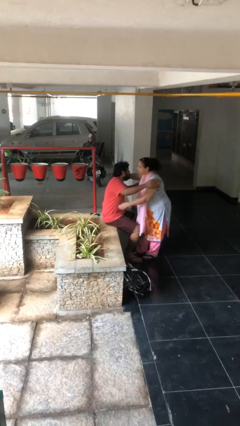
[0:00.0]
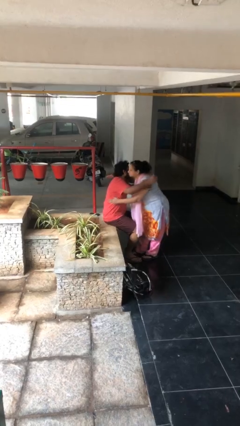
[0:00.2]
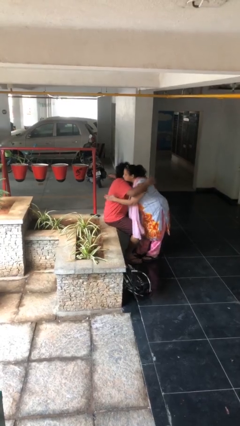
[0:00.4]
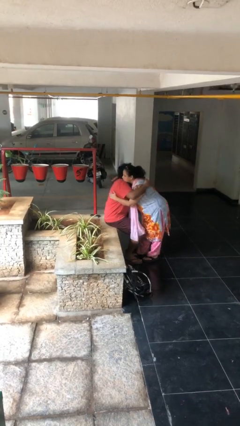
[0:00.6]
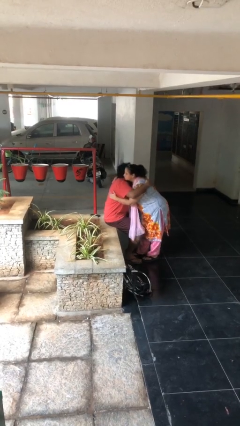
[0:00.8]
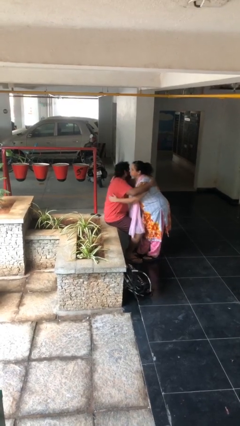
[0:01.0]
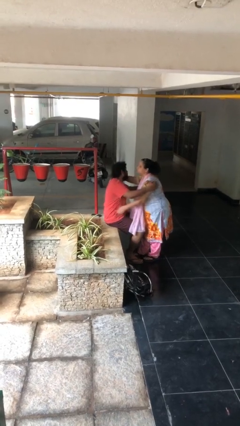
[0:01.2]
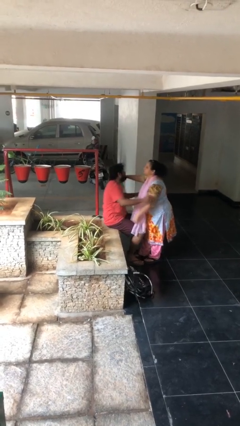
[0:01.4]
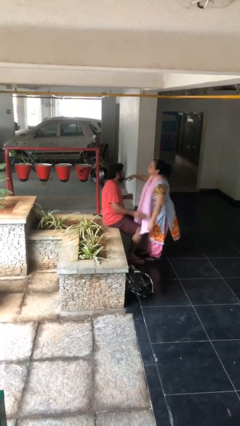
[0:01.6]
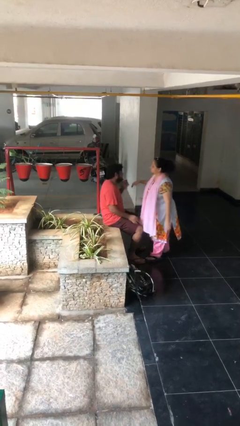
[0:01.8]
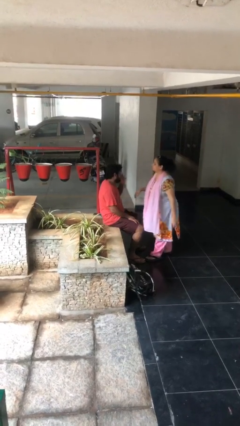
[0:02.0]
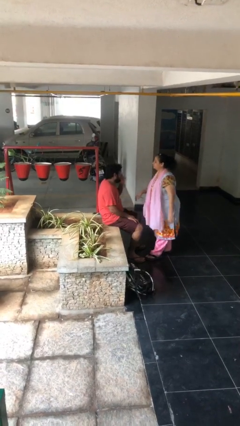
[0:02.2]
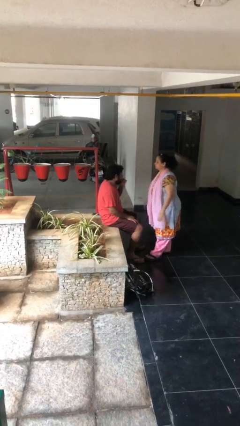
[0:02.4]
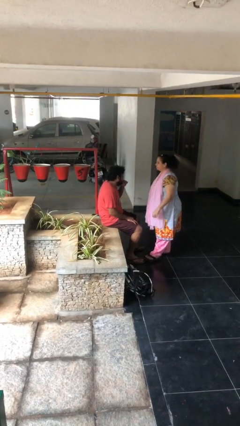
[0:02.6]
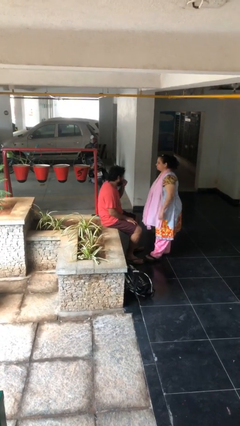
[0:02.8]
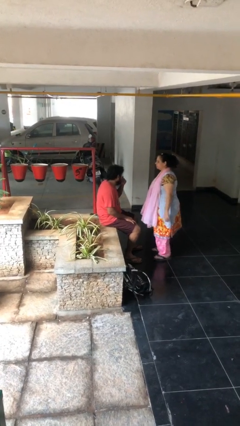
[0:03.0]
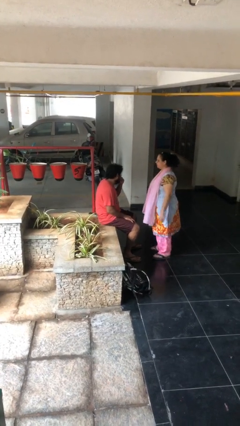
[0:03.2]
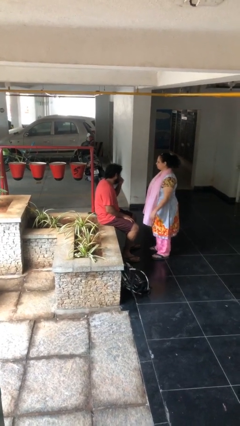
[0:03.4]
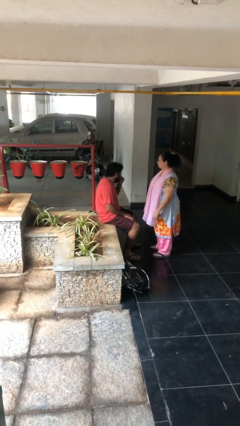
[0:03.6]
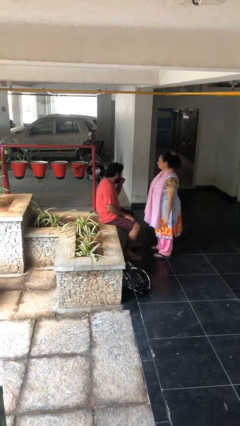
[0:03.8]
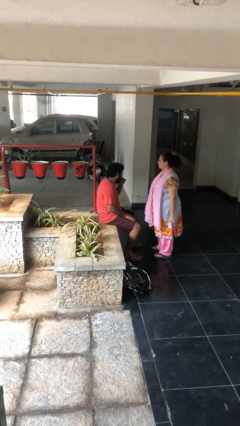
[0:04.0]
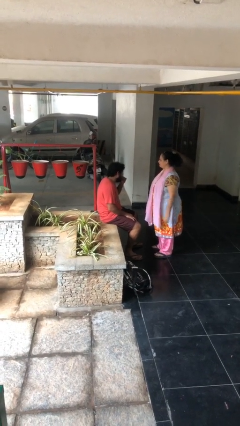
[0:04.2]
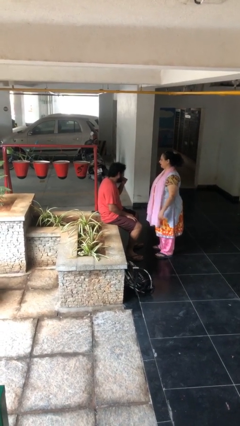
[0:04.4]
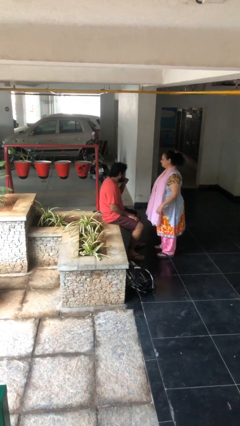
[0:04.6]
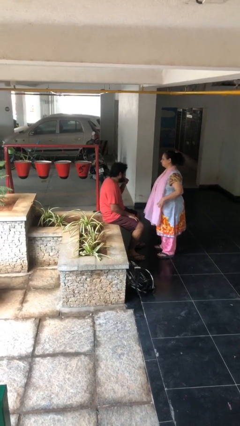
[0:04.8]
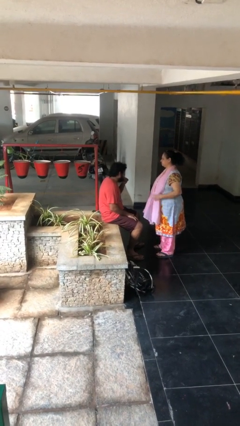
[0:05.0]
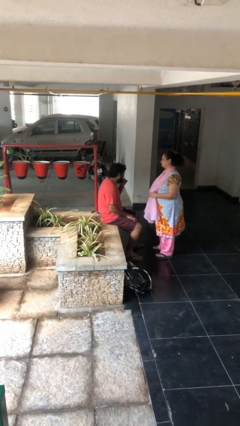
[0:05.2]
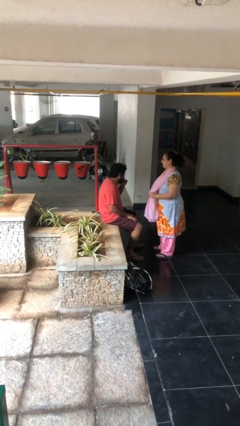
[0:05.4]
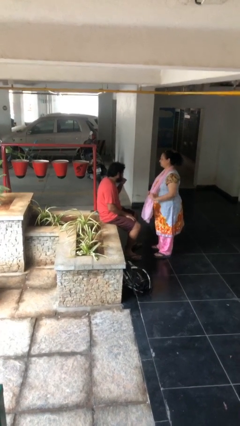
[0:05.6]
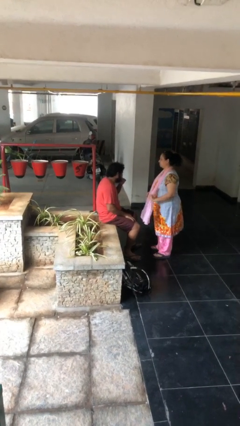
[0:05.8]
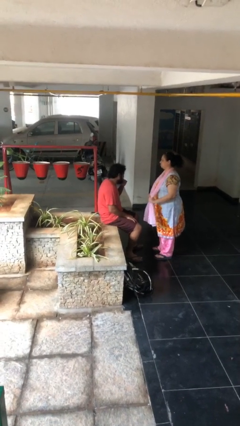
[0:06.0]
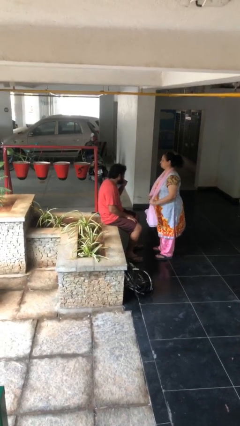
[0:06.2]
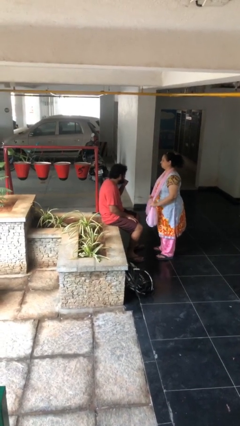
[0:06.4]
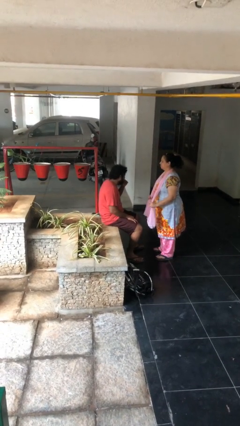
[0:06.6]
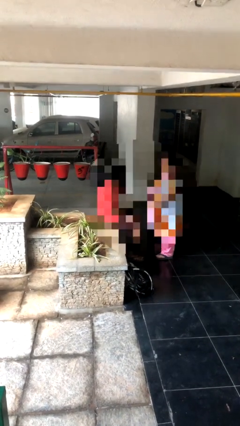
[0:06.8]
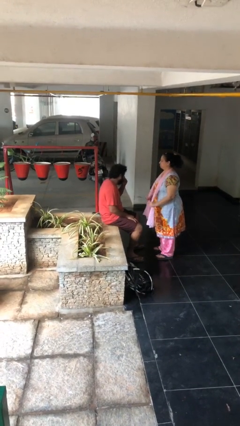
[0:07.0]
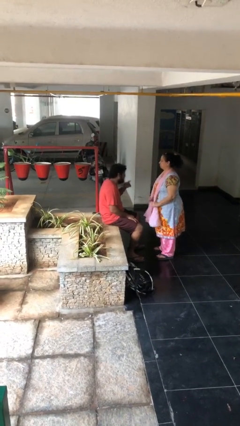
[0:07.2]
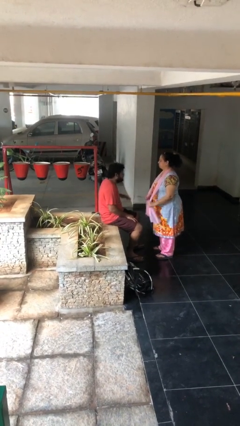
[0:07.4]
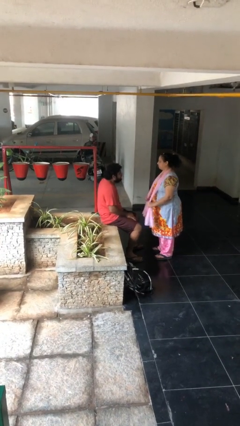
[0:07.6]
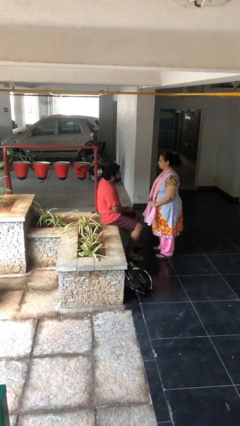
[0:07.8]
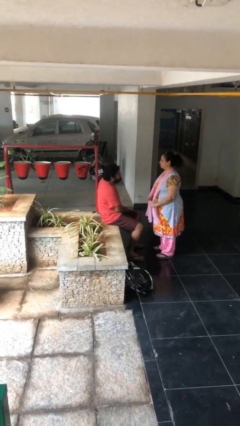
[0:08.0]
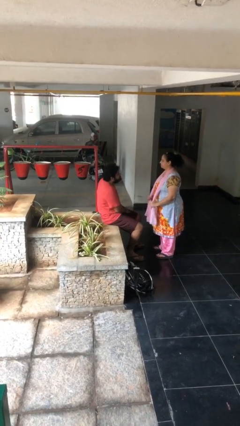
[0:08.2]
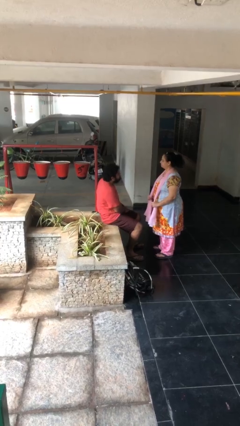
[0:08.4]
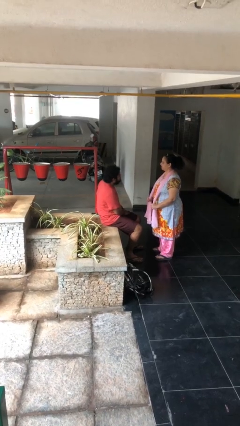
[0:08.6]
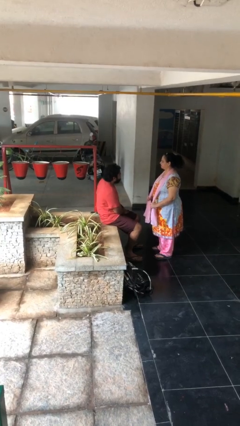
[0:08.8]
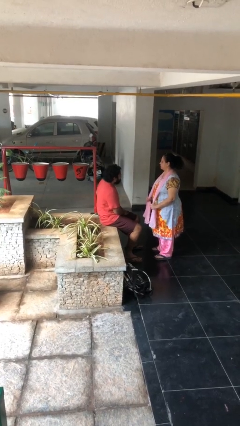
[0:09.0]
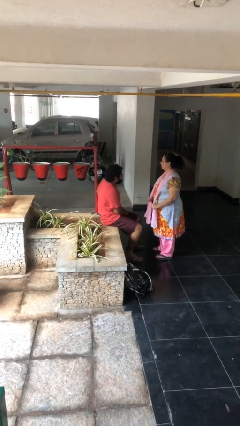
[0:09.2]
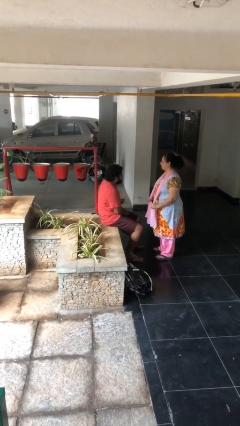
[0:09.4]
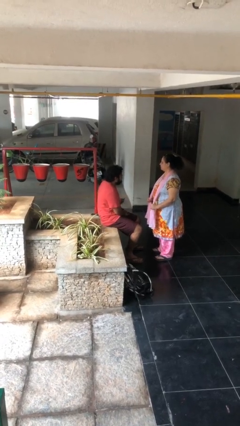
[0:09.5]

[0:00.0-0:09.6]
person embraces person

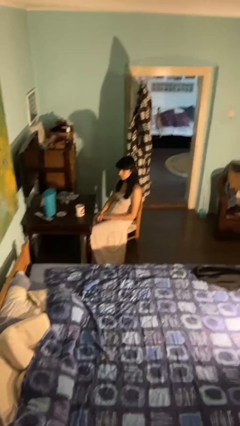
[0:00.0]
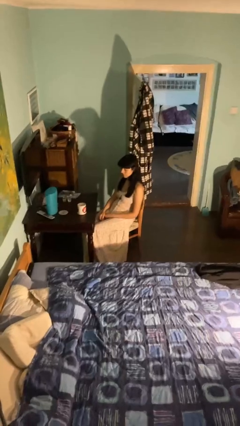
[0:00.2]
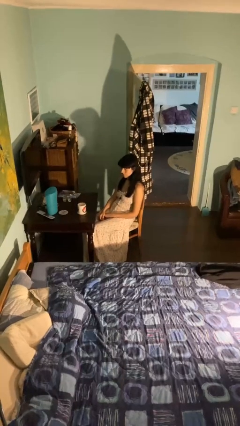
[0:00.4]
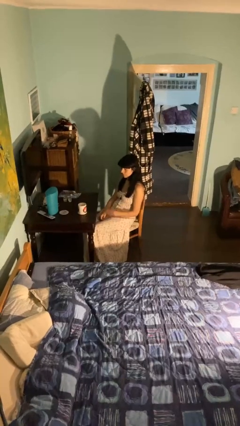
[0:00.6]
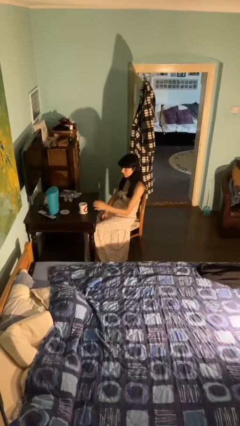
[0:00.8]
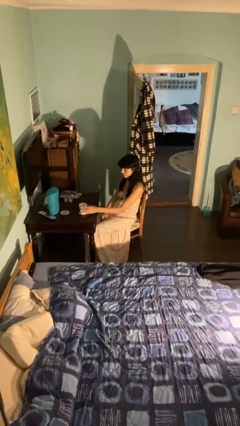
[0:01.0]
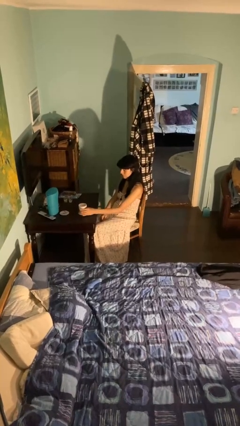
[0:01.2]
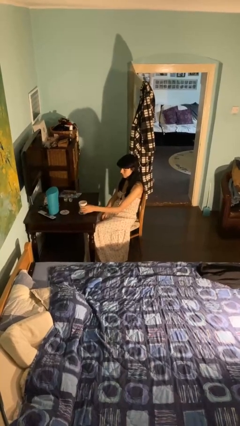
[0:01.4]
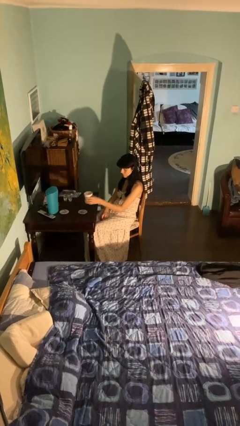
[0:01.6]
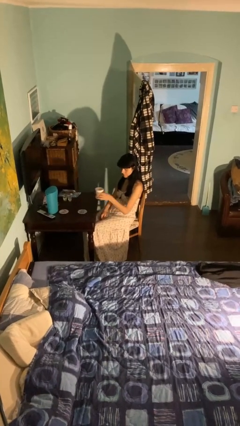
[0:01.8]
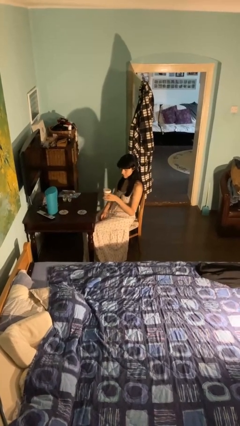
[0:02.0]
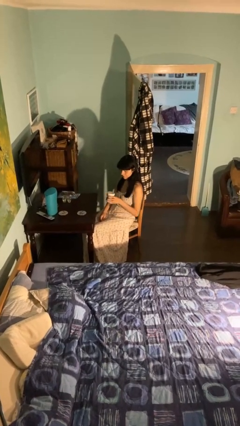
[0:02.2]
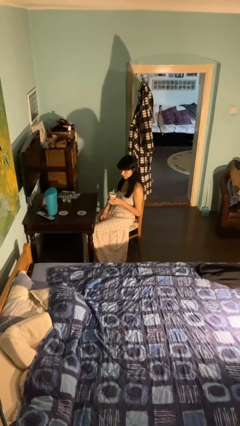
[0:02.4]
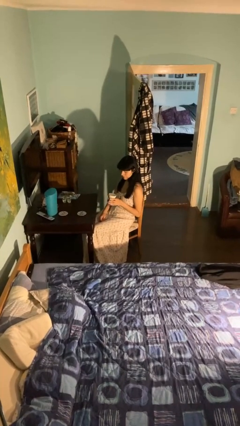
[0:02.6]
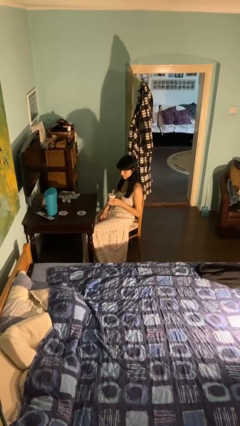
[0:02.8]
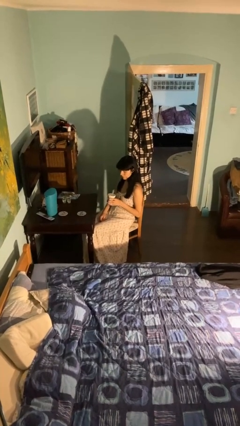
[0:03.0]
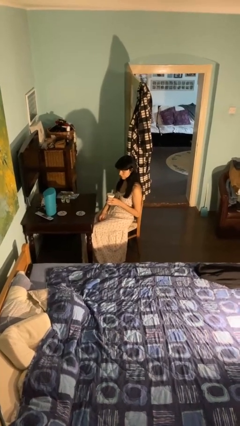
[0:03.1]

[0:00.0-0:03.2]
person picks up object from table

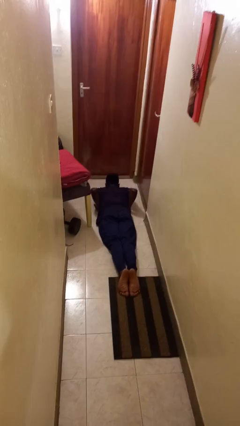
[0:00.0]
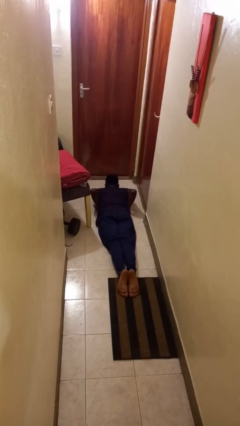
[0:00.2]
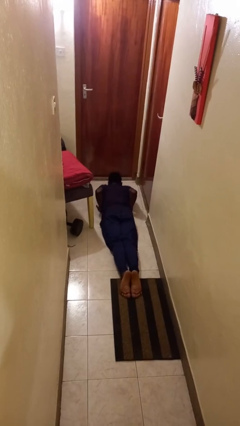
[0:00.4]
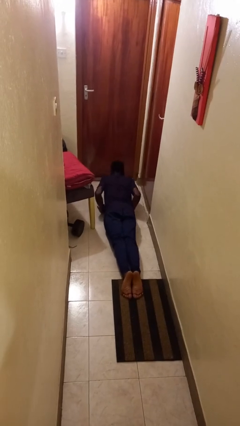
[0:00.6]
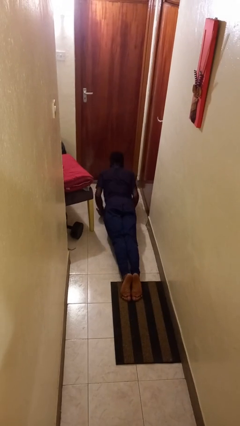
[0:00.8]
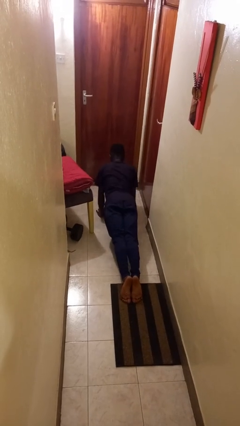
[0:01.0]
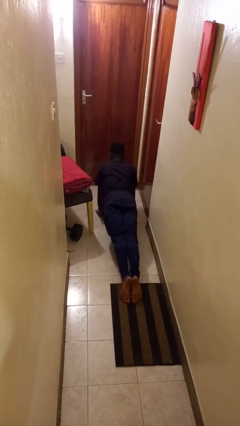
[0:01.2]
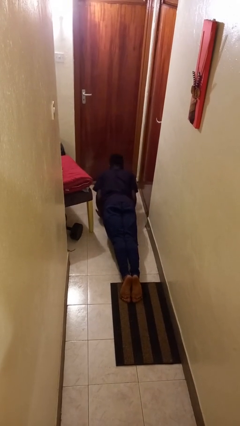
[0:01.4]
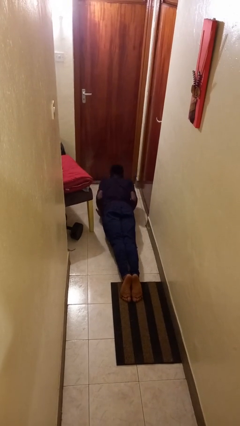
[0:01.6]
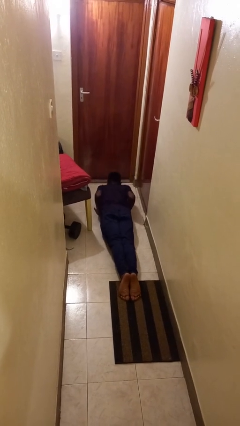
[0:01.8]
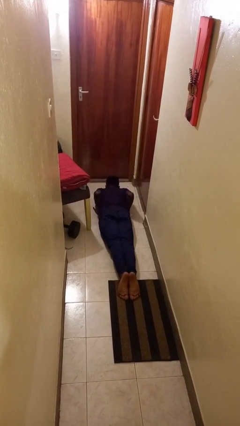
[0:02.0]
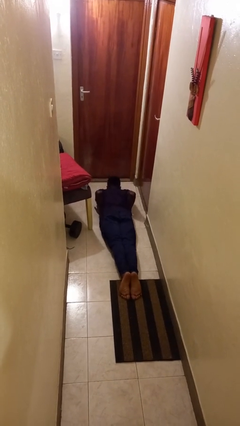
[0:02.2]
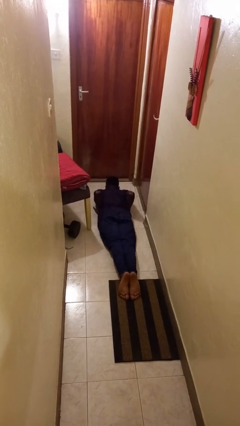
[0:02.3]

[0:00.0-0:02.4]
person exercises with pushup

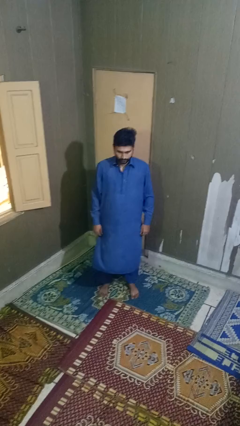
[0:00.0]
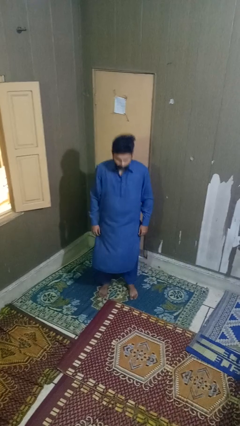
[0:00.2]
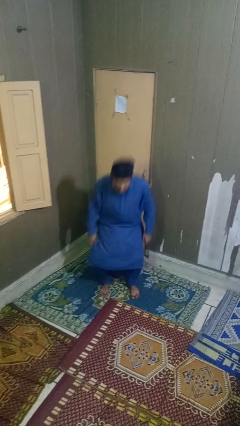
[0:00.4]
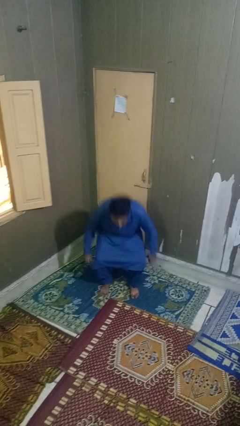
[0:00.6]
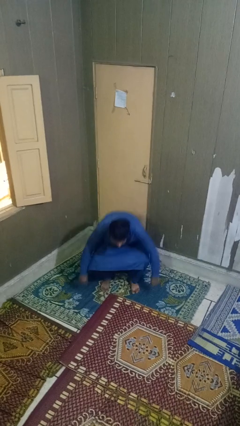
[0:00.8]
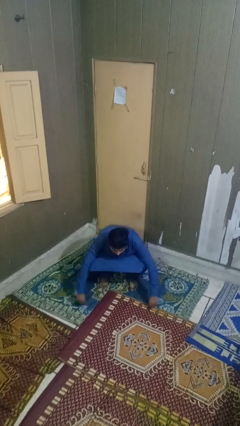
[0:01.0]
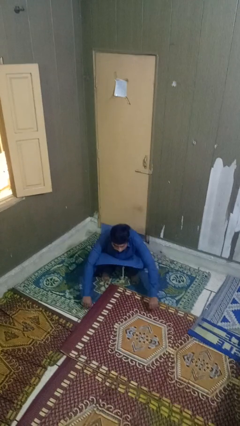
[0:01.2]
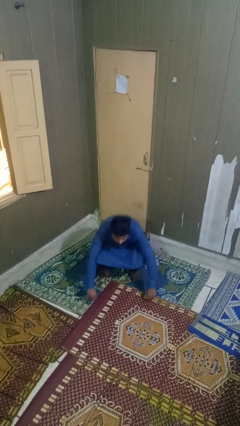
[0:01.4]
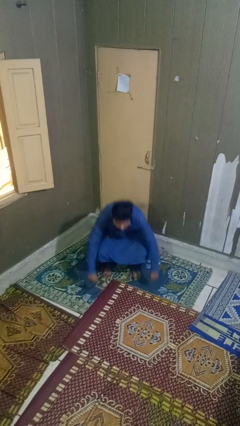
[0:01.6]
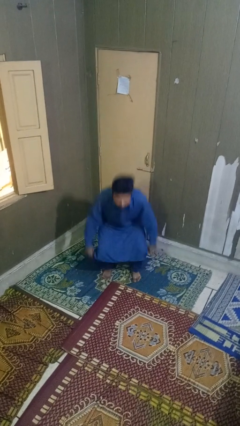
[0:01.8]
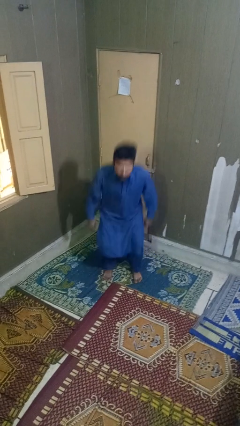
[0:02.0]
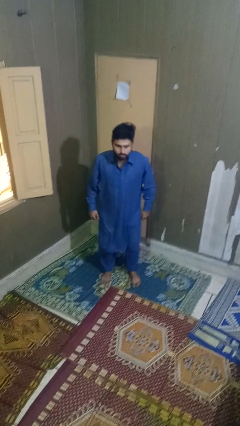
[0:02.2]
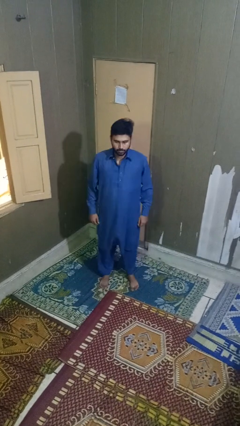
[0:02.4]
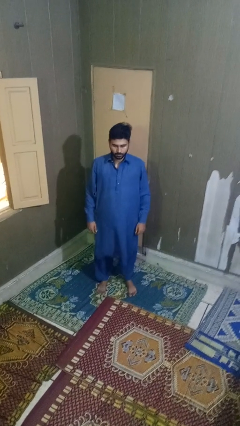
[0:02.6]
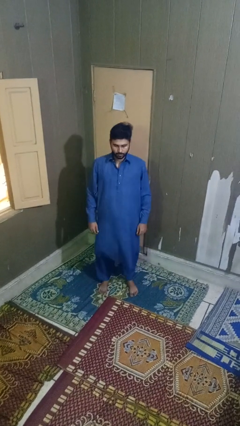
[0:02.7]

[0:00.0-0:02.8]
person exercises with situp
